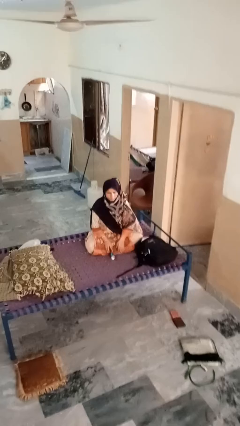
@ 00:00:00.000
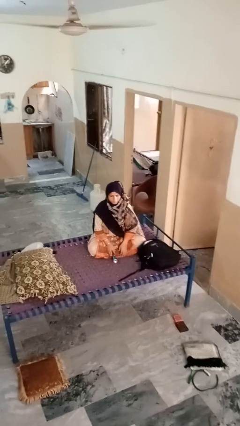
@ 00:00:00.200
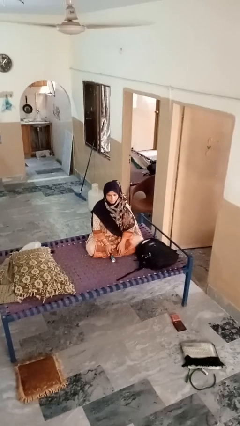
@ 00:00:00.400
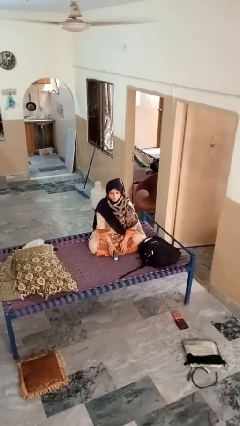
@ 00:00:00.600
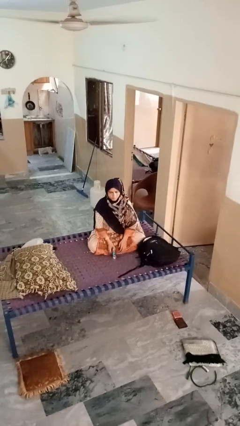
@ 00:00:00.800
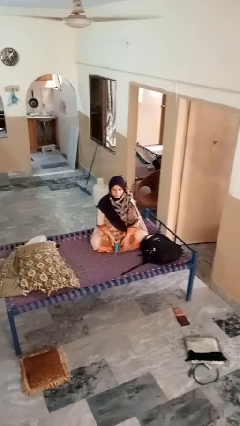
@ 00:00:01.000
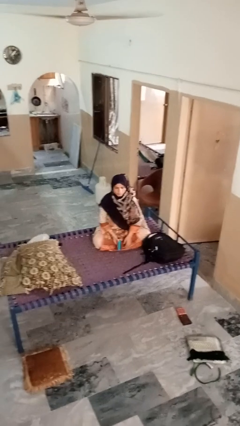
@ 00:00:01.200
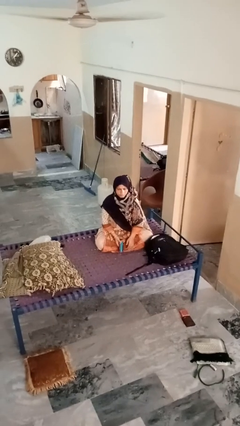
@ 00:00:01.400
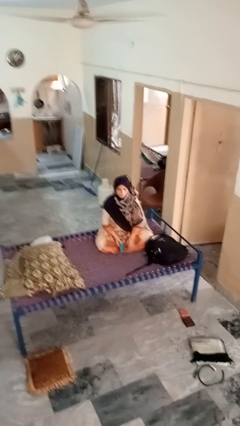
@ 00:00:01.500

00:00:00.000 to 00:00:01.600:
person picks up object from floor

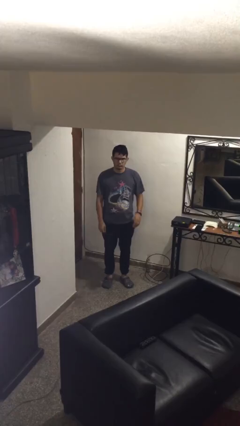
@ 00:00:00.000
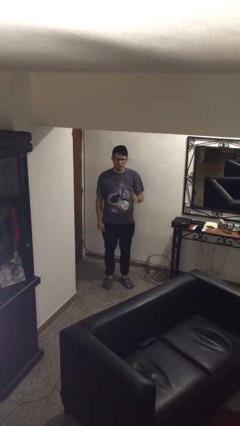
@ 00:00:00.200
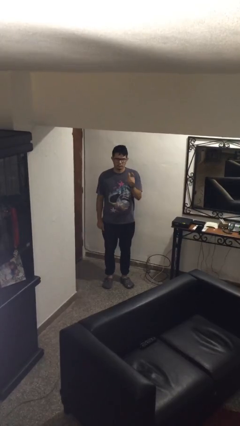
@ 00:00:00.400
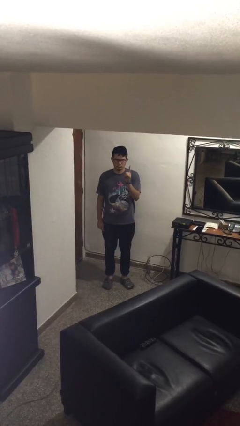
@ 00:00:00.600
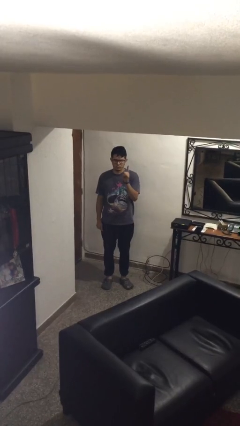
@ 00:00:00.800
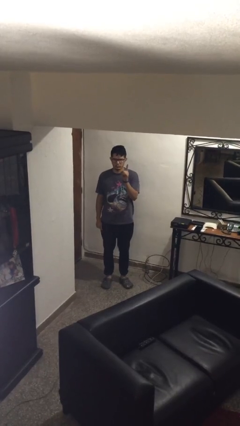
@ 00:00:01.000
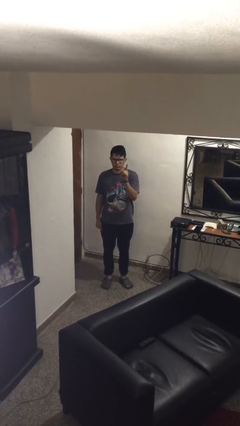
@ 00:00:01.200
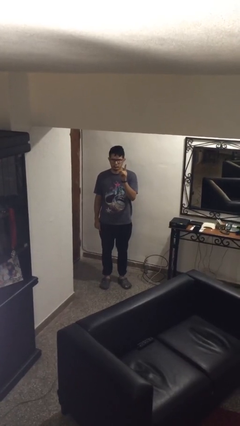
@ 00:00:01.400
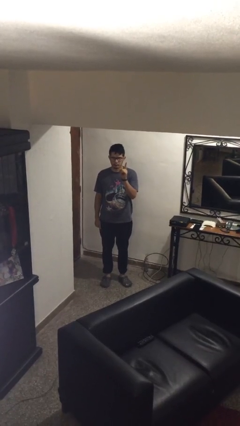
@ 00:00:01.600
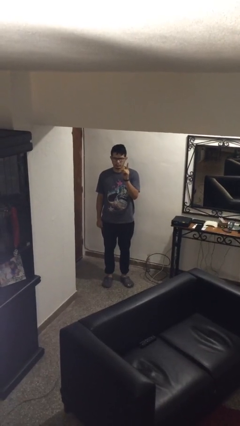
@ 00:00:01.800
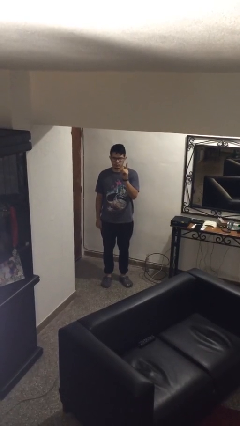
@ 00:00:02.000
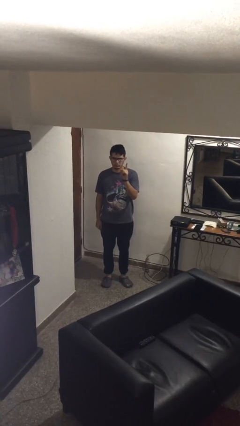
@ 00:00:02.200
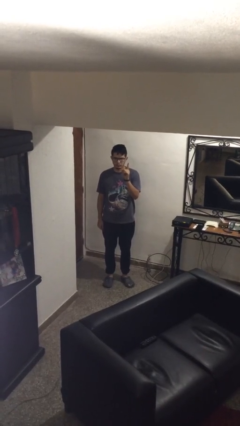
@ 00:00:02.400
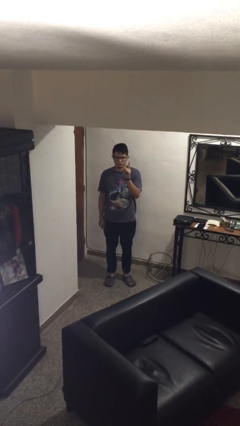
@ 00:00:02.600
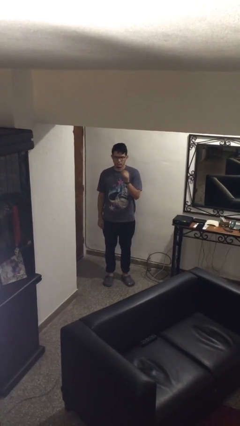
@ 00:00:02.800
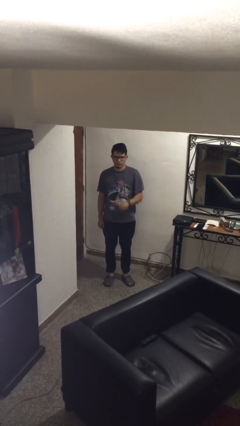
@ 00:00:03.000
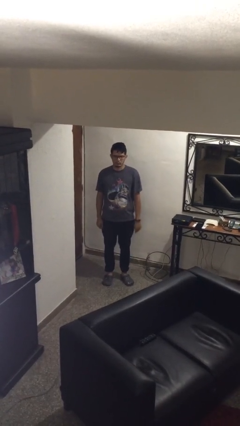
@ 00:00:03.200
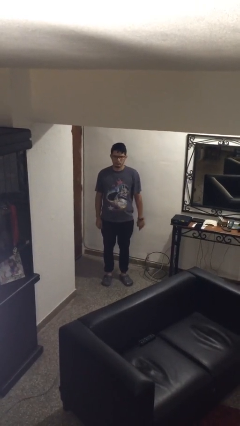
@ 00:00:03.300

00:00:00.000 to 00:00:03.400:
person gestures number one

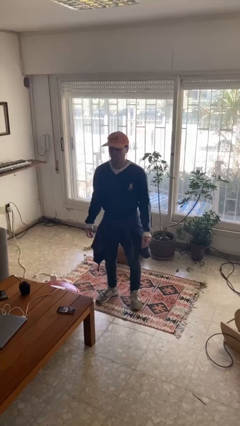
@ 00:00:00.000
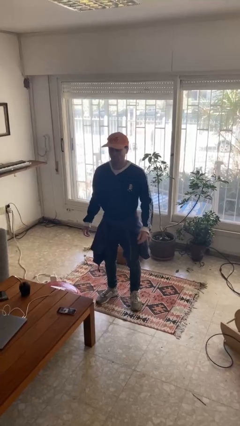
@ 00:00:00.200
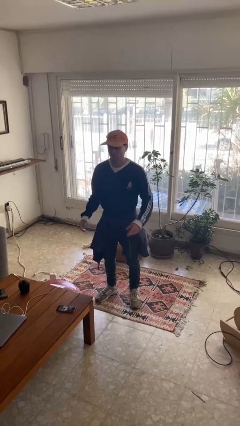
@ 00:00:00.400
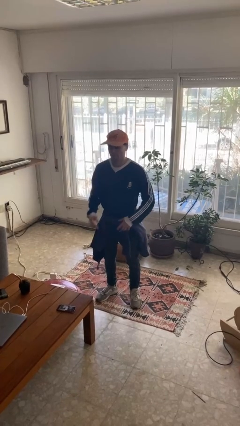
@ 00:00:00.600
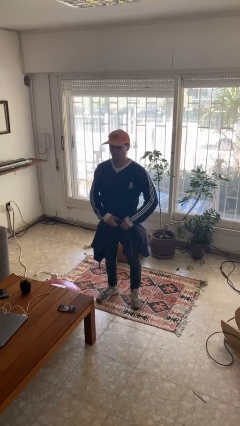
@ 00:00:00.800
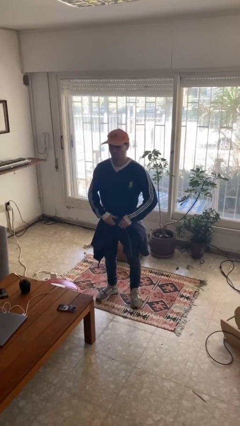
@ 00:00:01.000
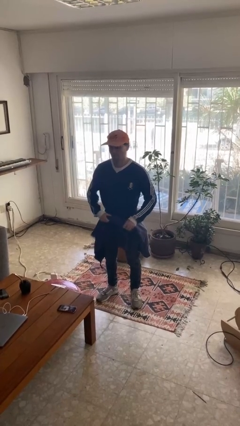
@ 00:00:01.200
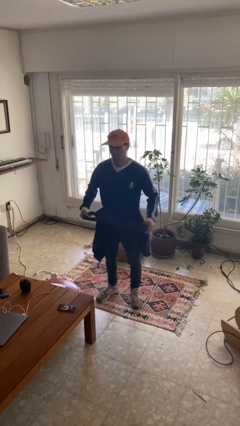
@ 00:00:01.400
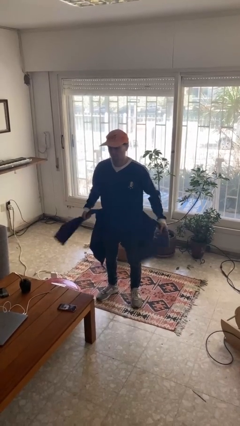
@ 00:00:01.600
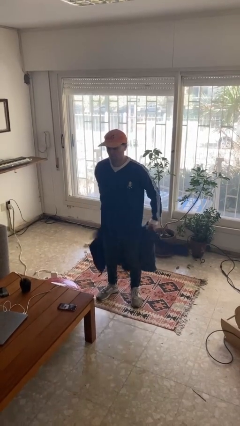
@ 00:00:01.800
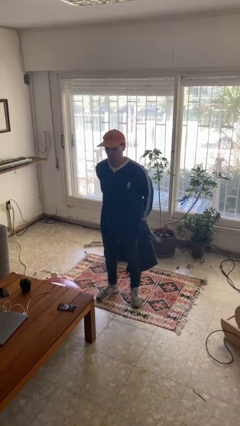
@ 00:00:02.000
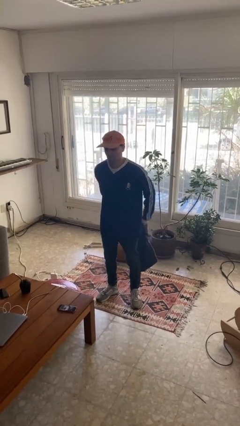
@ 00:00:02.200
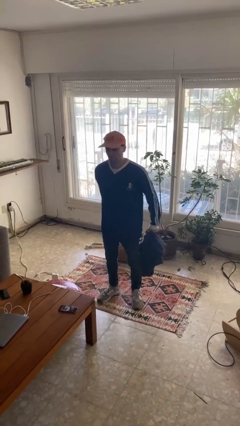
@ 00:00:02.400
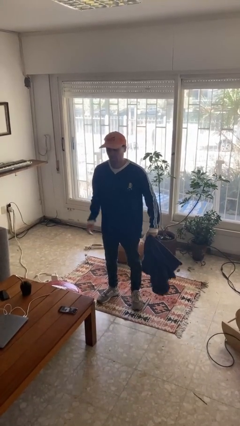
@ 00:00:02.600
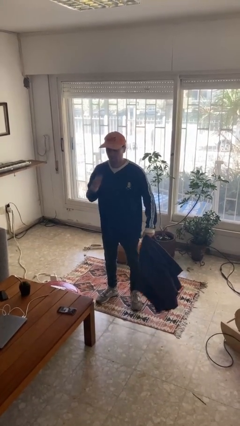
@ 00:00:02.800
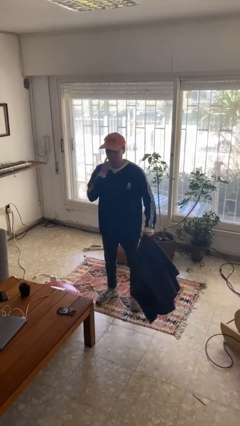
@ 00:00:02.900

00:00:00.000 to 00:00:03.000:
person unties jacket around waist

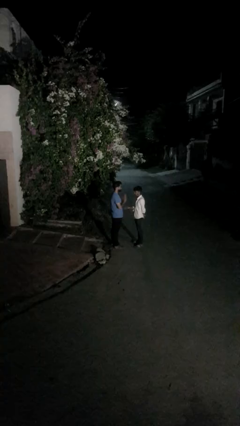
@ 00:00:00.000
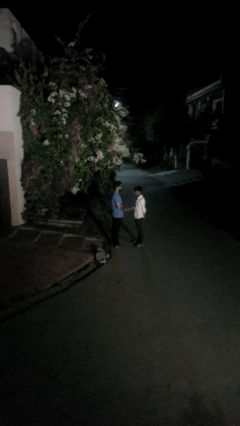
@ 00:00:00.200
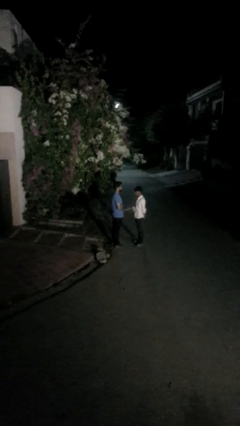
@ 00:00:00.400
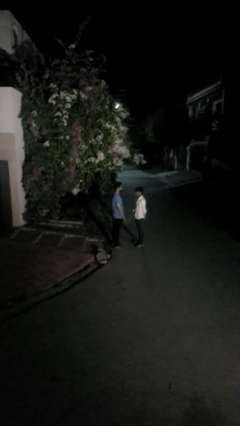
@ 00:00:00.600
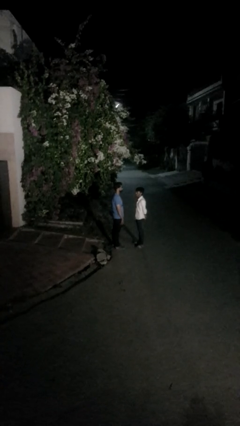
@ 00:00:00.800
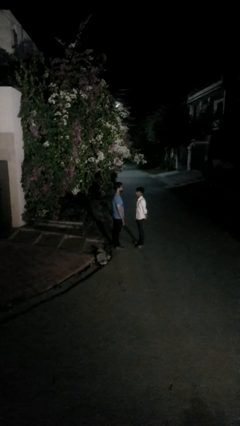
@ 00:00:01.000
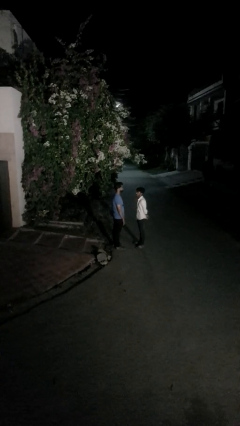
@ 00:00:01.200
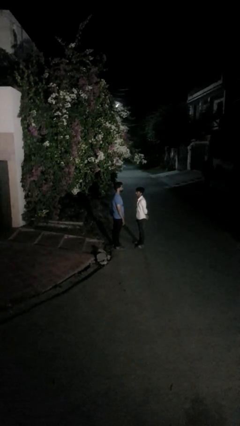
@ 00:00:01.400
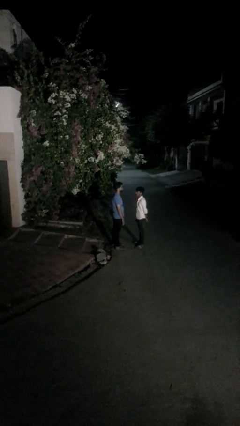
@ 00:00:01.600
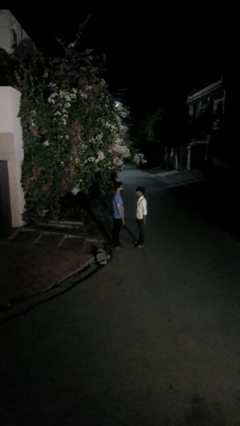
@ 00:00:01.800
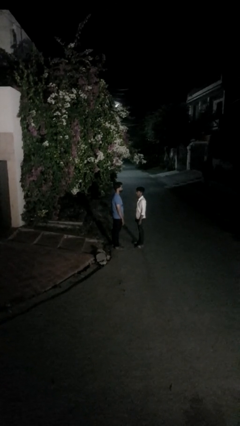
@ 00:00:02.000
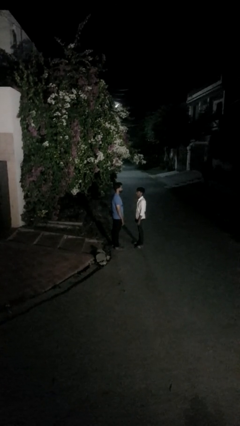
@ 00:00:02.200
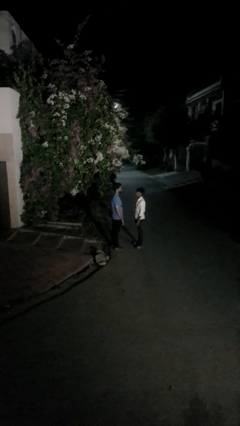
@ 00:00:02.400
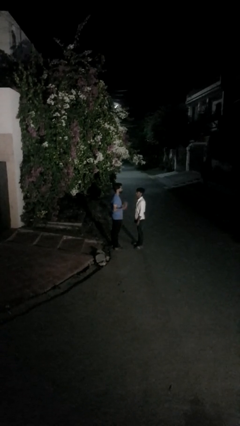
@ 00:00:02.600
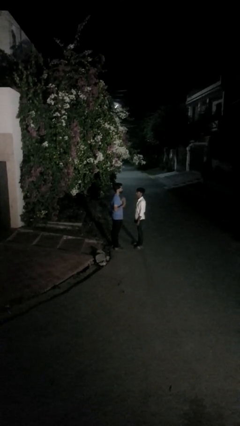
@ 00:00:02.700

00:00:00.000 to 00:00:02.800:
person highfives hand

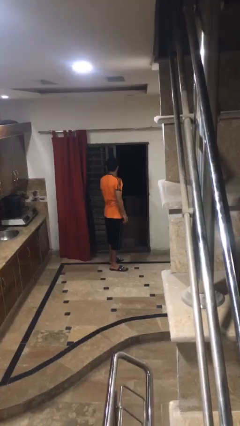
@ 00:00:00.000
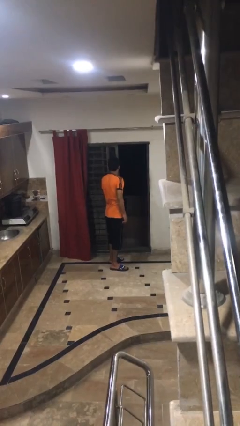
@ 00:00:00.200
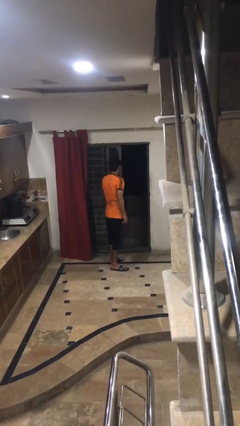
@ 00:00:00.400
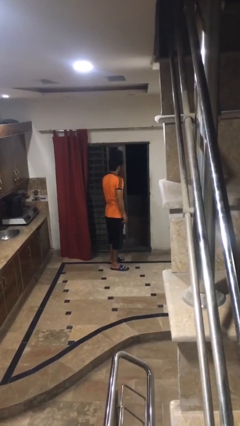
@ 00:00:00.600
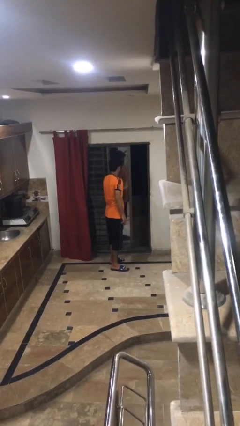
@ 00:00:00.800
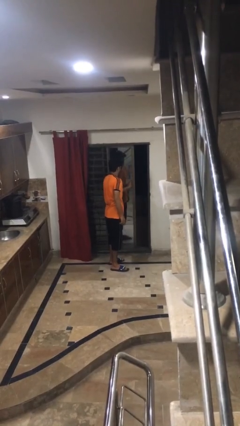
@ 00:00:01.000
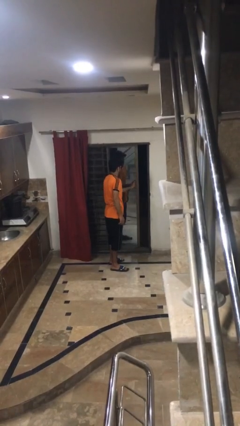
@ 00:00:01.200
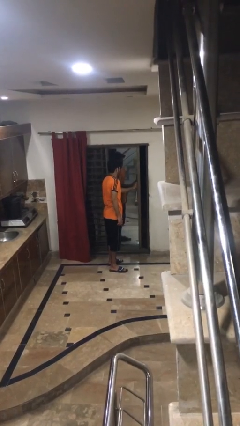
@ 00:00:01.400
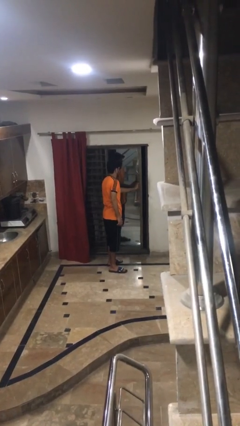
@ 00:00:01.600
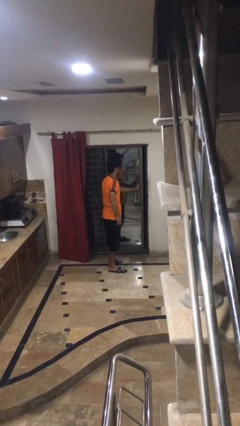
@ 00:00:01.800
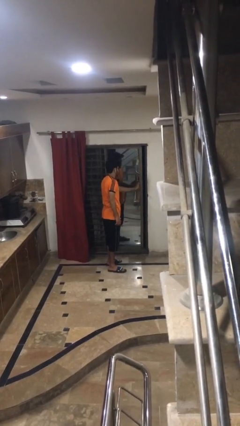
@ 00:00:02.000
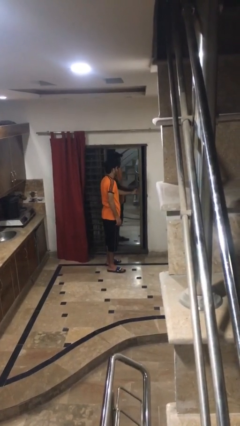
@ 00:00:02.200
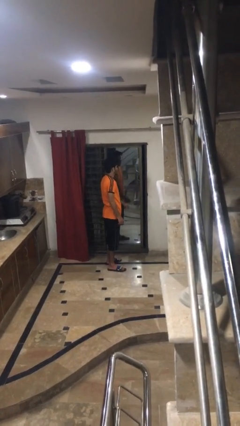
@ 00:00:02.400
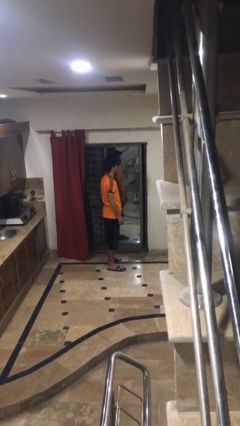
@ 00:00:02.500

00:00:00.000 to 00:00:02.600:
person closes sliding door

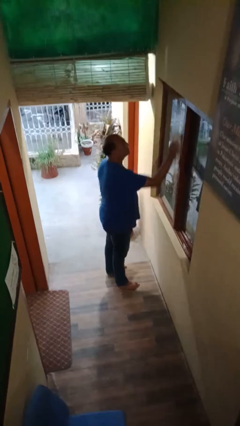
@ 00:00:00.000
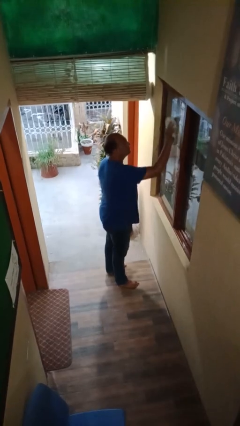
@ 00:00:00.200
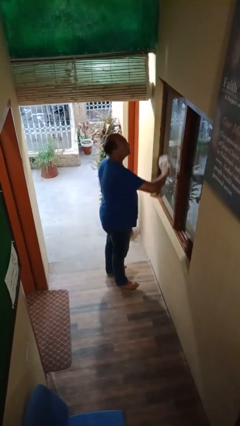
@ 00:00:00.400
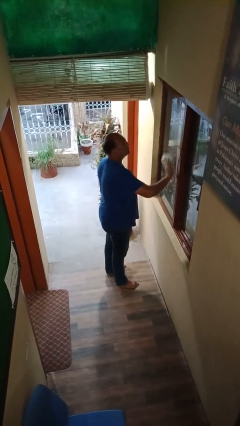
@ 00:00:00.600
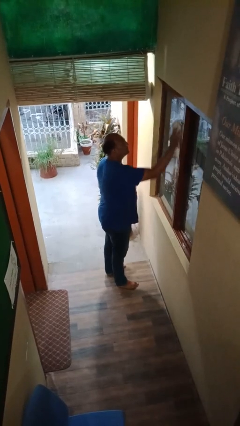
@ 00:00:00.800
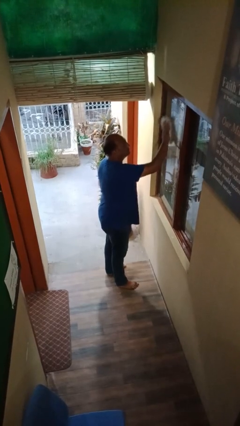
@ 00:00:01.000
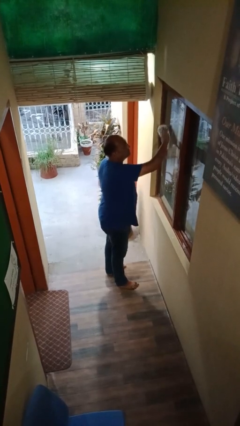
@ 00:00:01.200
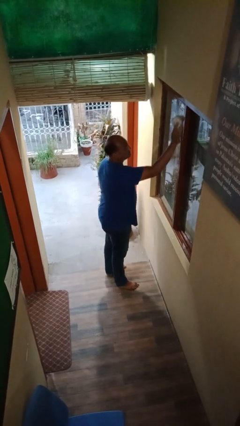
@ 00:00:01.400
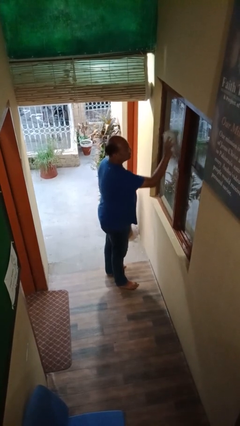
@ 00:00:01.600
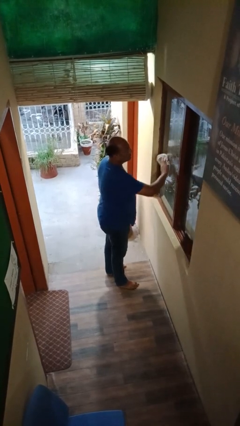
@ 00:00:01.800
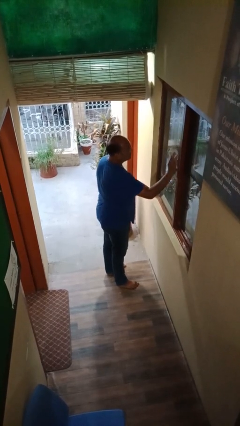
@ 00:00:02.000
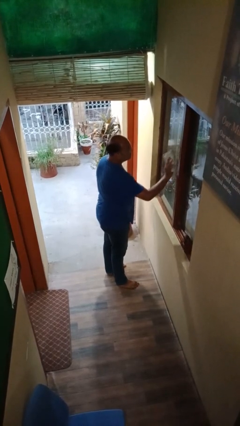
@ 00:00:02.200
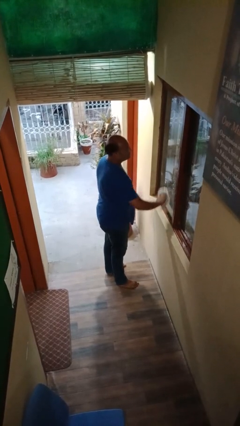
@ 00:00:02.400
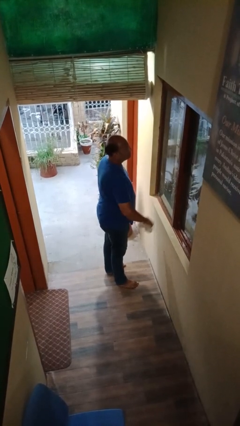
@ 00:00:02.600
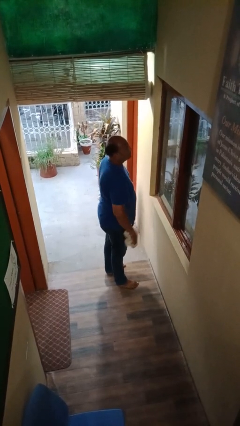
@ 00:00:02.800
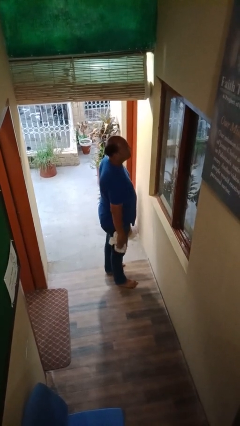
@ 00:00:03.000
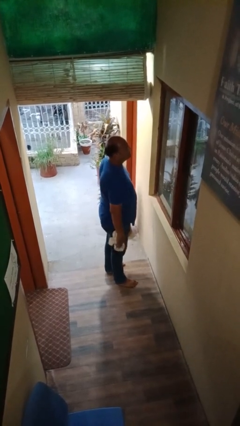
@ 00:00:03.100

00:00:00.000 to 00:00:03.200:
person washes window

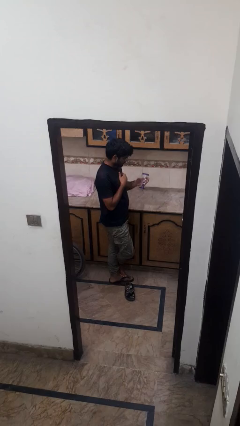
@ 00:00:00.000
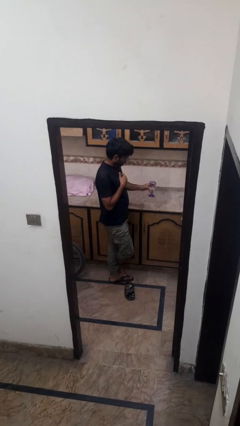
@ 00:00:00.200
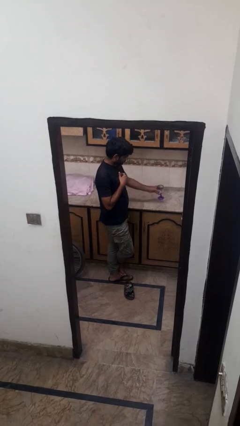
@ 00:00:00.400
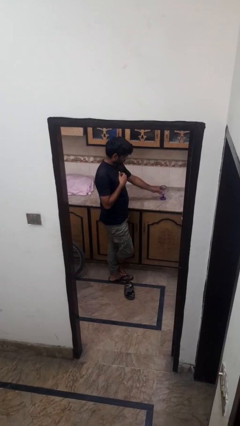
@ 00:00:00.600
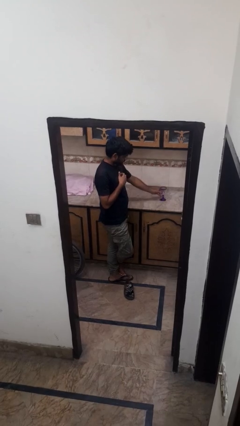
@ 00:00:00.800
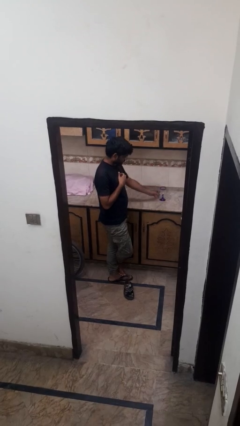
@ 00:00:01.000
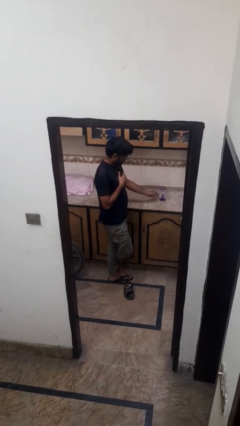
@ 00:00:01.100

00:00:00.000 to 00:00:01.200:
person puts down object on countertop
